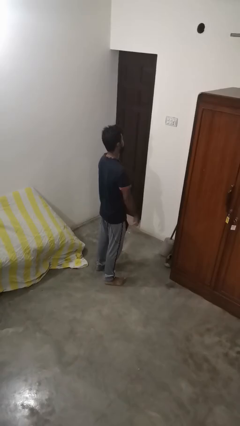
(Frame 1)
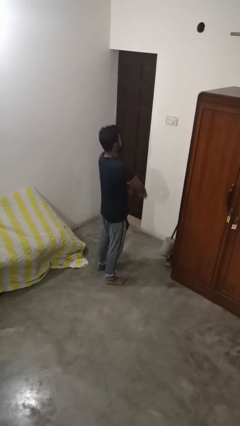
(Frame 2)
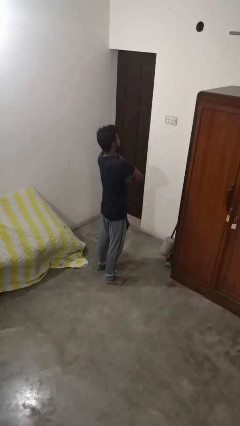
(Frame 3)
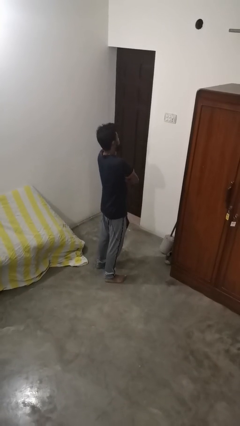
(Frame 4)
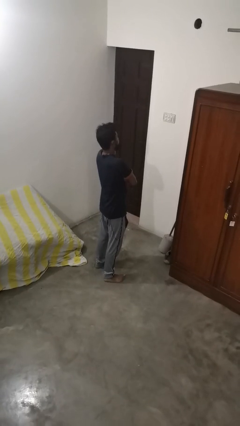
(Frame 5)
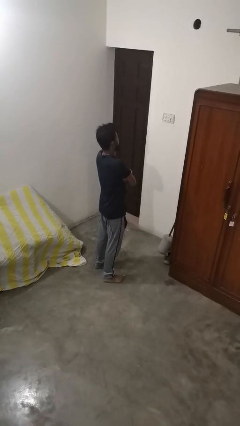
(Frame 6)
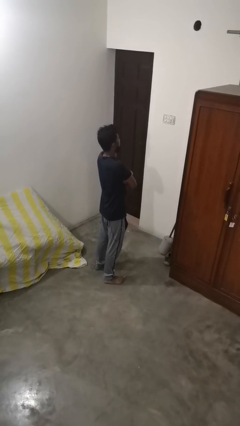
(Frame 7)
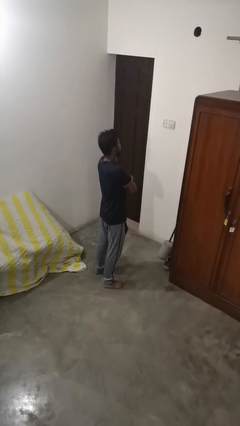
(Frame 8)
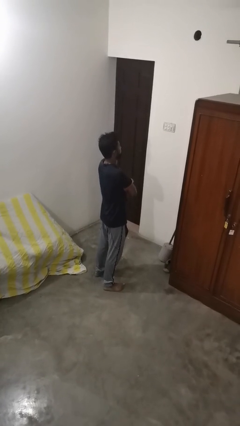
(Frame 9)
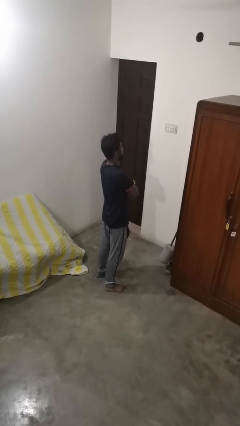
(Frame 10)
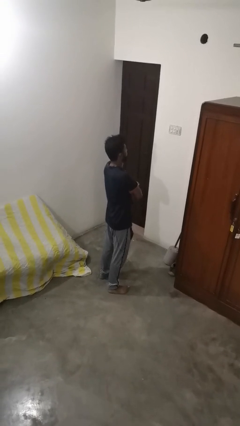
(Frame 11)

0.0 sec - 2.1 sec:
person crosses arms

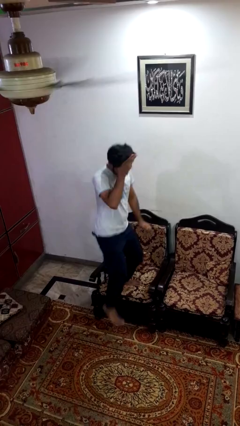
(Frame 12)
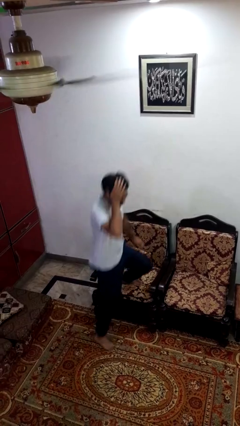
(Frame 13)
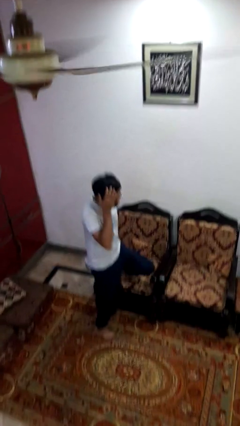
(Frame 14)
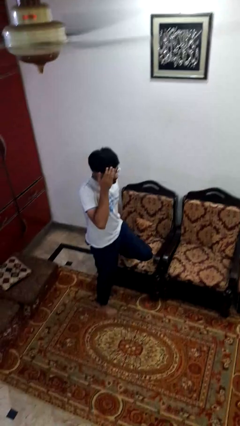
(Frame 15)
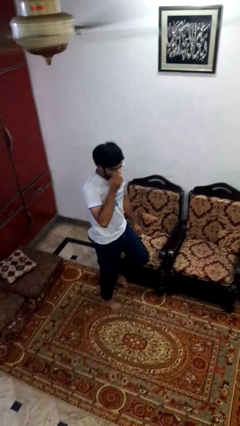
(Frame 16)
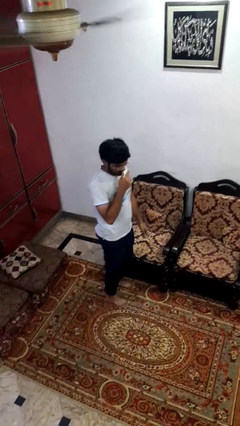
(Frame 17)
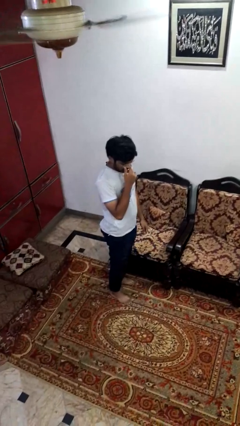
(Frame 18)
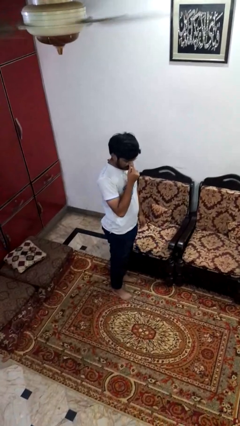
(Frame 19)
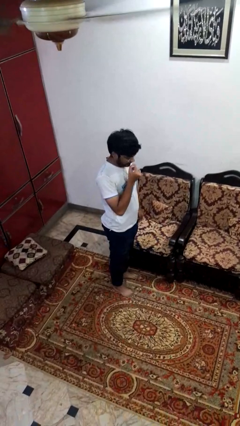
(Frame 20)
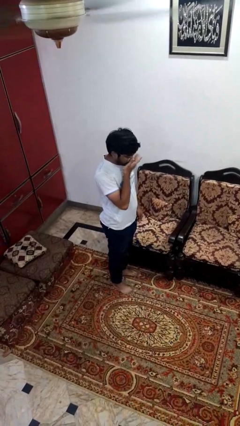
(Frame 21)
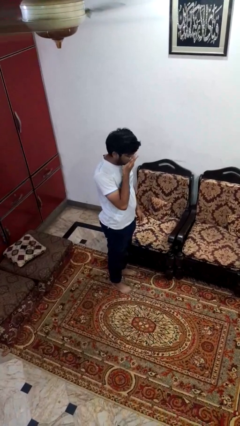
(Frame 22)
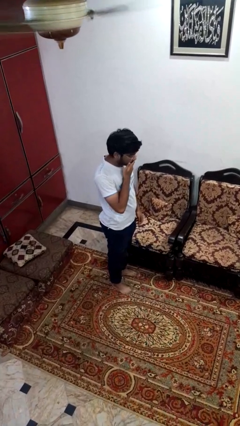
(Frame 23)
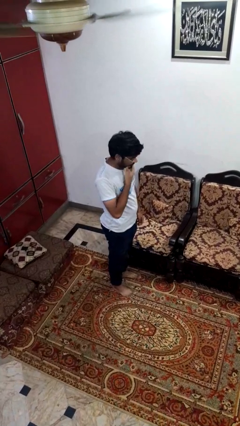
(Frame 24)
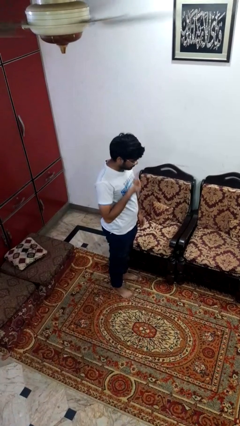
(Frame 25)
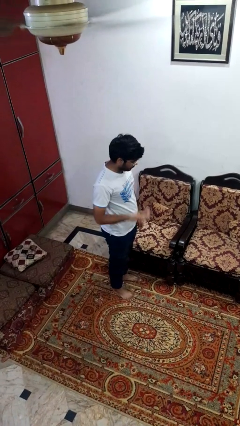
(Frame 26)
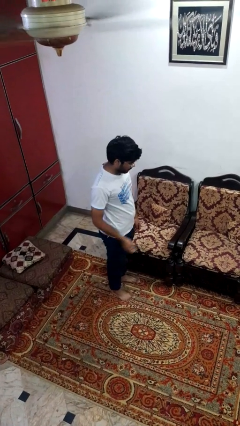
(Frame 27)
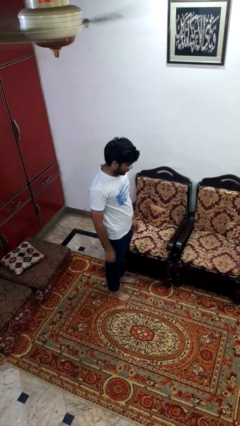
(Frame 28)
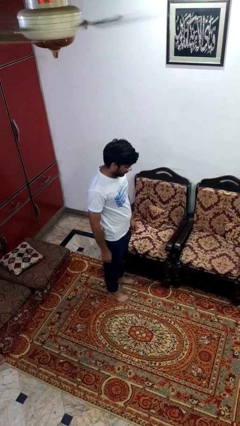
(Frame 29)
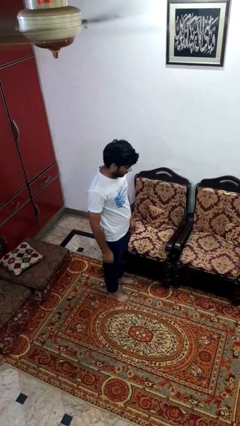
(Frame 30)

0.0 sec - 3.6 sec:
person climbs off couch

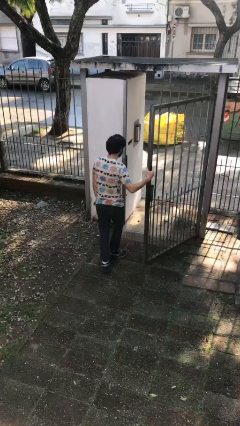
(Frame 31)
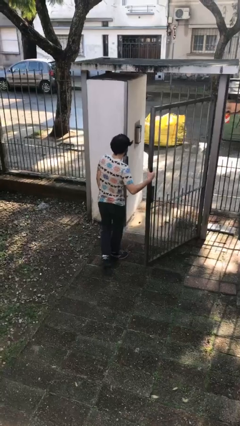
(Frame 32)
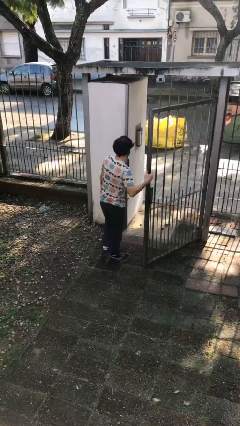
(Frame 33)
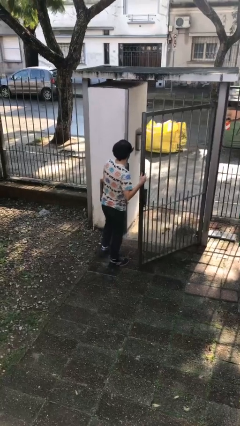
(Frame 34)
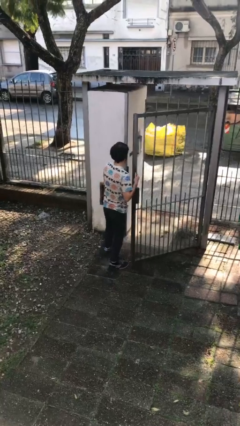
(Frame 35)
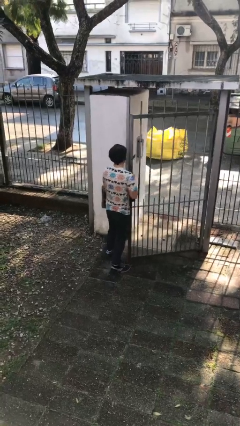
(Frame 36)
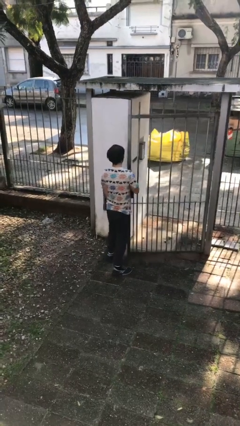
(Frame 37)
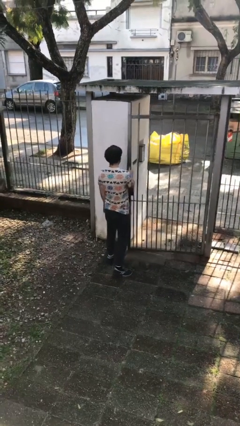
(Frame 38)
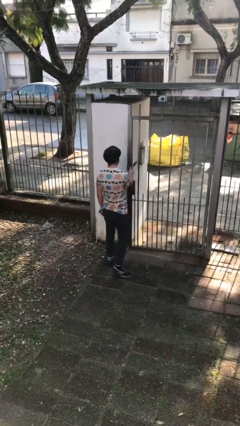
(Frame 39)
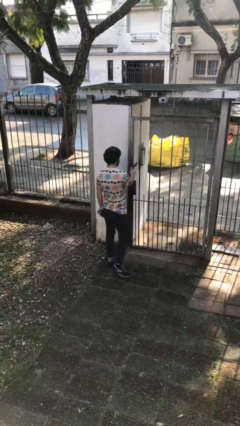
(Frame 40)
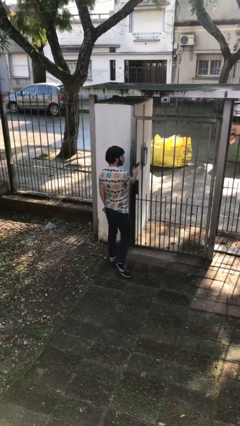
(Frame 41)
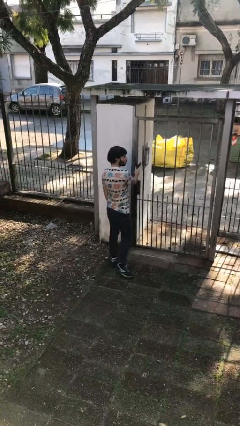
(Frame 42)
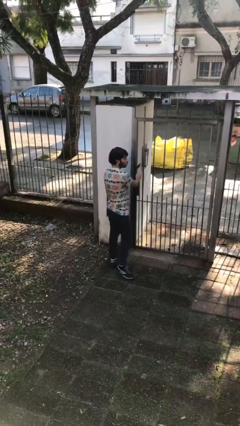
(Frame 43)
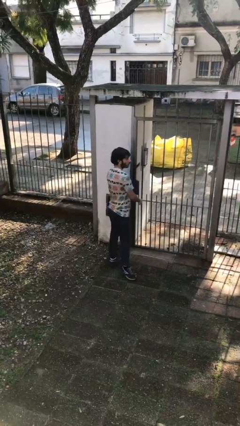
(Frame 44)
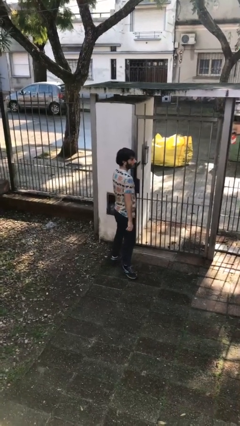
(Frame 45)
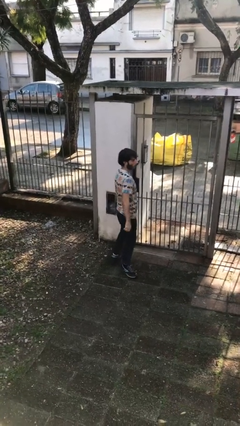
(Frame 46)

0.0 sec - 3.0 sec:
person closes gate

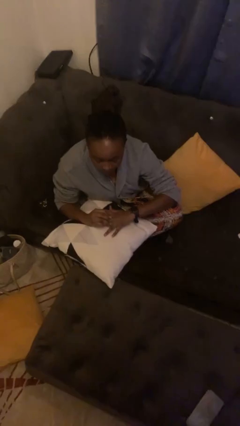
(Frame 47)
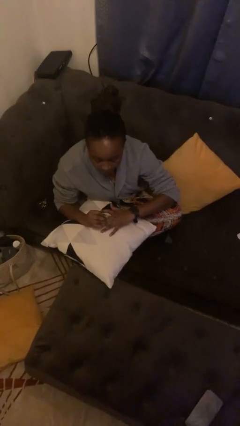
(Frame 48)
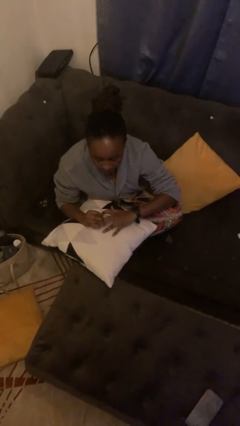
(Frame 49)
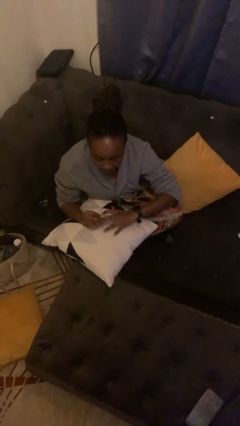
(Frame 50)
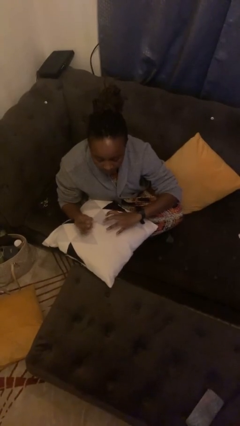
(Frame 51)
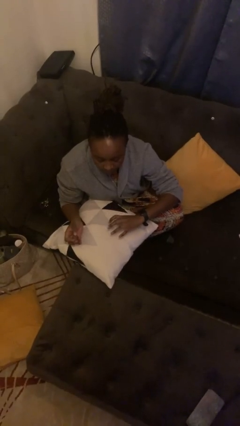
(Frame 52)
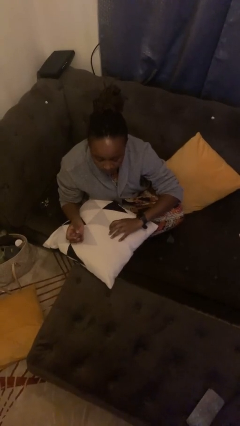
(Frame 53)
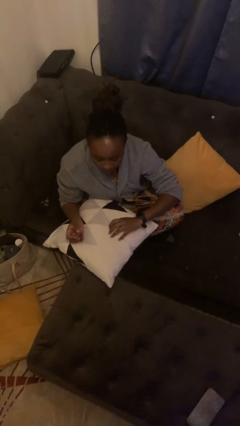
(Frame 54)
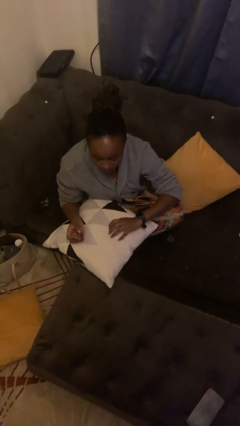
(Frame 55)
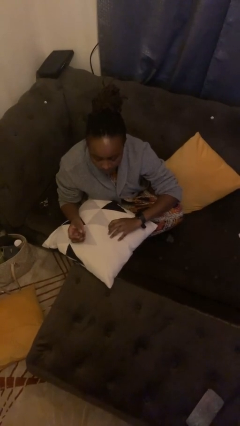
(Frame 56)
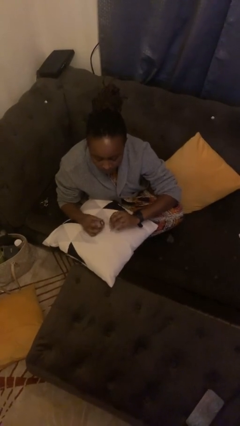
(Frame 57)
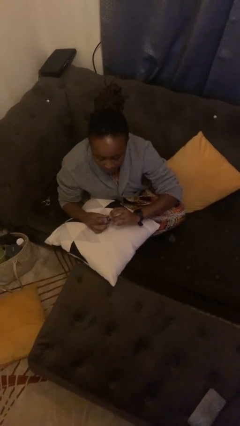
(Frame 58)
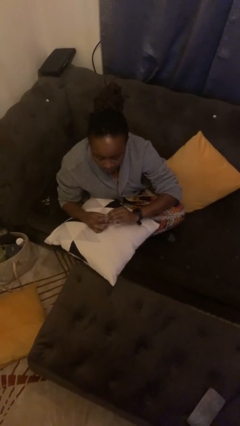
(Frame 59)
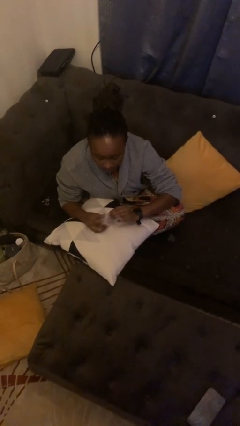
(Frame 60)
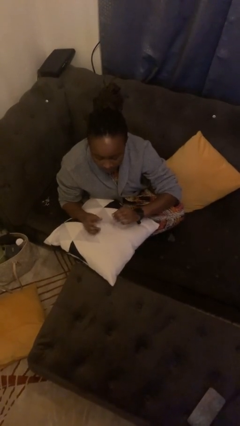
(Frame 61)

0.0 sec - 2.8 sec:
person takes off ring

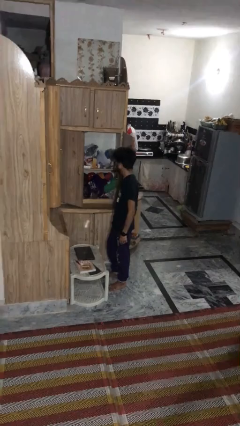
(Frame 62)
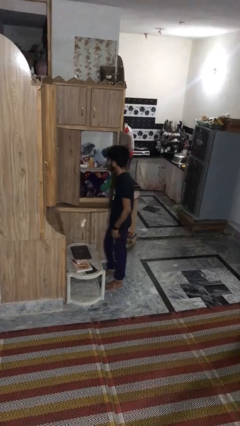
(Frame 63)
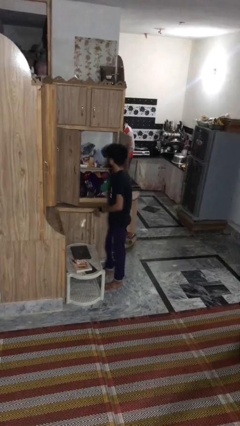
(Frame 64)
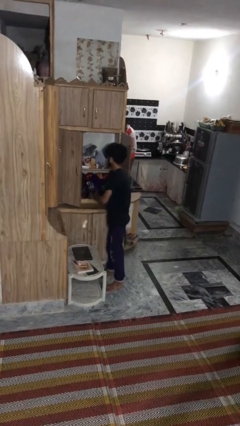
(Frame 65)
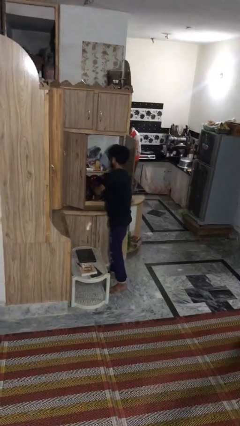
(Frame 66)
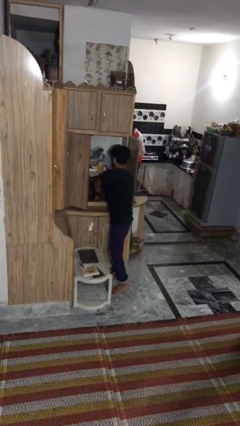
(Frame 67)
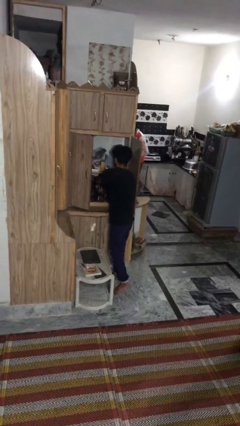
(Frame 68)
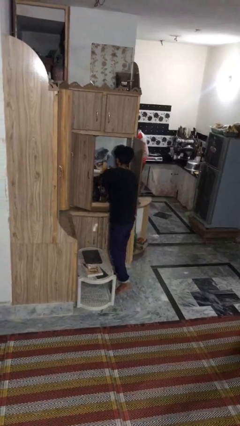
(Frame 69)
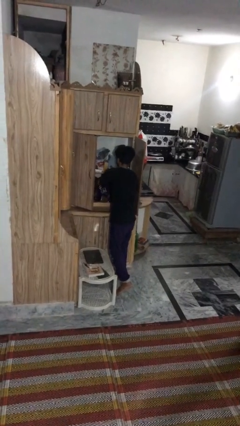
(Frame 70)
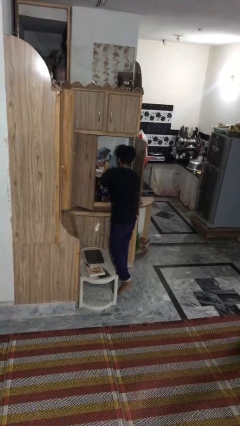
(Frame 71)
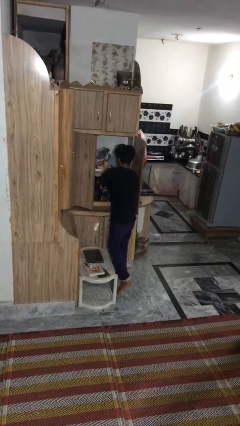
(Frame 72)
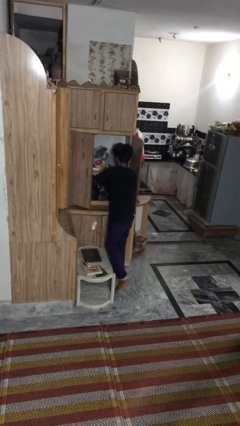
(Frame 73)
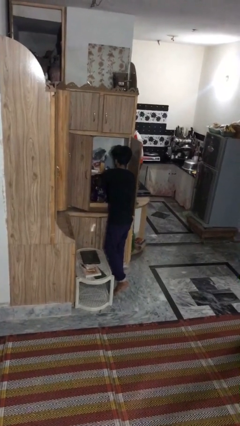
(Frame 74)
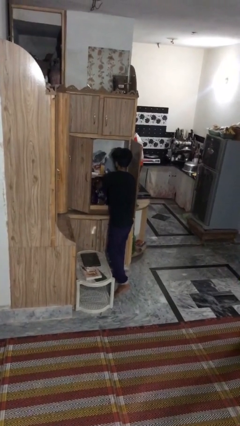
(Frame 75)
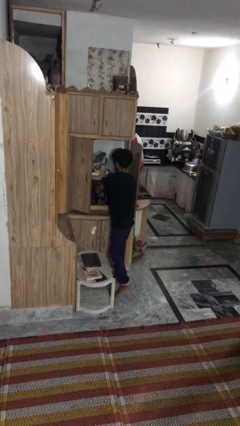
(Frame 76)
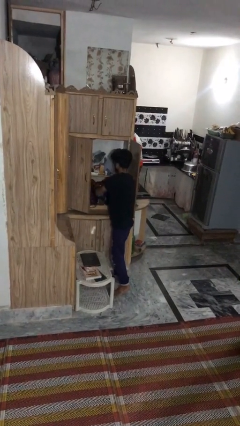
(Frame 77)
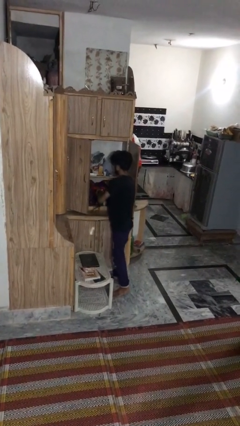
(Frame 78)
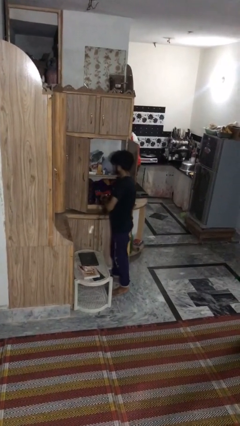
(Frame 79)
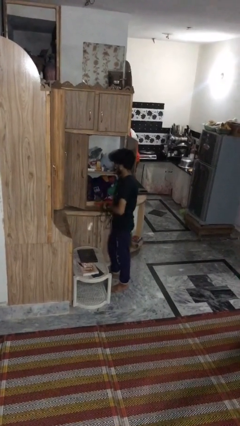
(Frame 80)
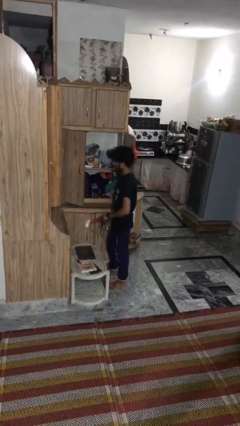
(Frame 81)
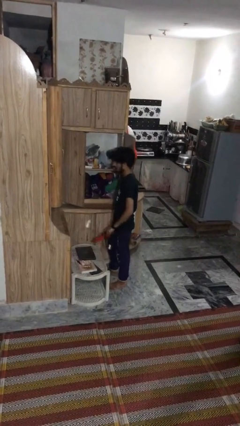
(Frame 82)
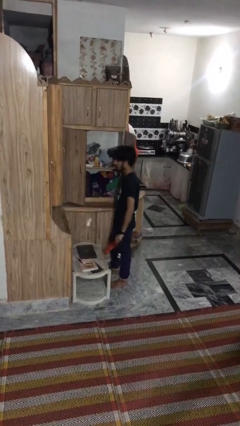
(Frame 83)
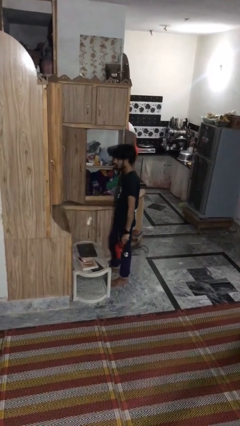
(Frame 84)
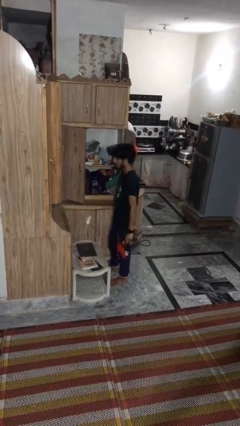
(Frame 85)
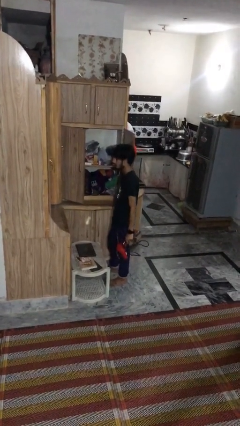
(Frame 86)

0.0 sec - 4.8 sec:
person picks up object from cabinet

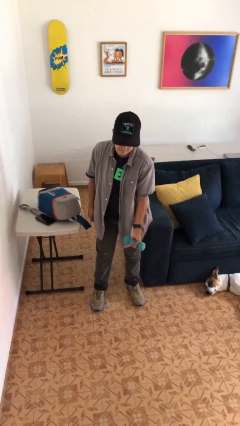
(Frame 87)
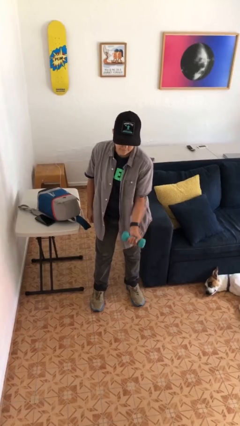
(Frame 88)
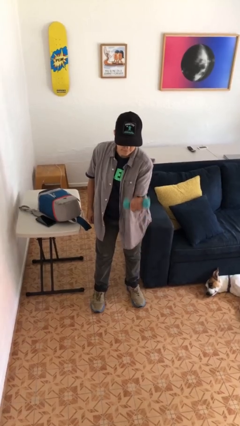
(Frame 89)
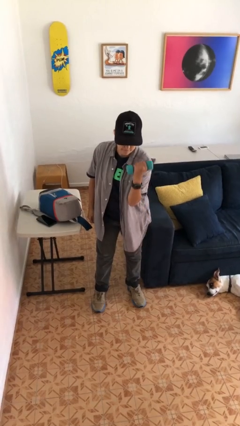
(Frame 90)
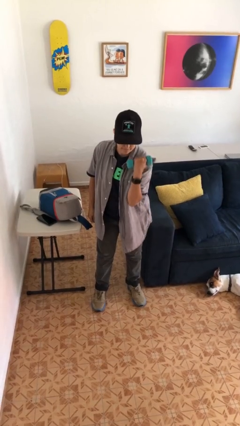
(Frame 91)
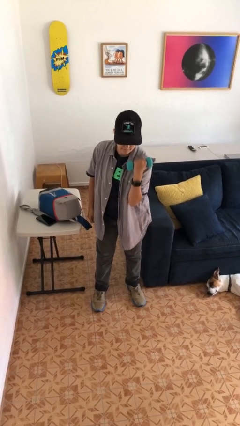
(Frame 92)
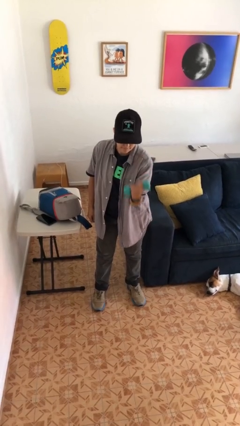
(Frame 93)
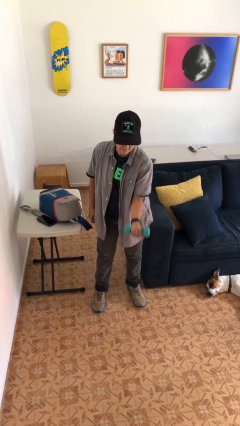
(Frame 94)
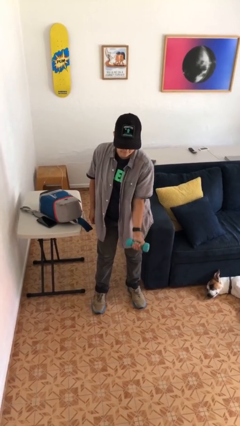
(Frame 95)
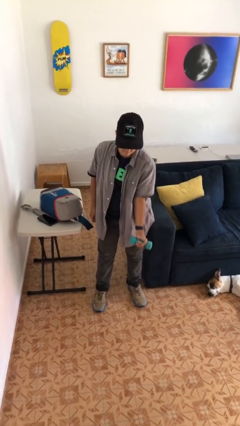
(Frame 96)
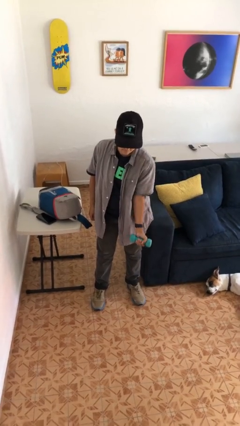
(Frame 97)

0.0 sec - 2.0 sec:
person lifts dumbbells
